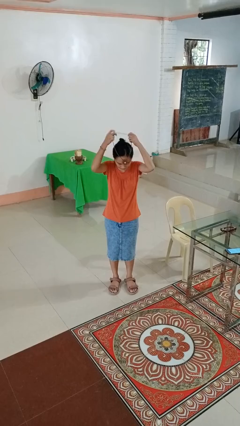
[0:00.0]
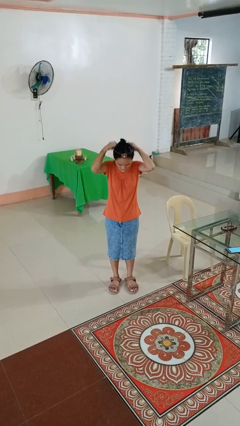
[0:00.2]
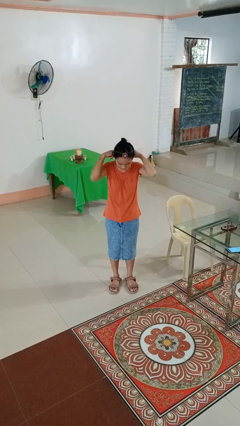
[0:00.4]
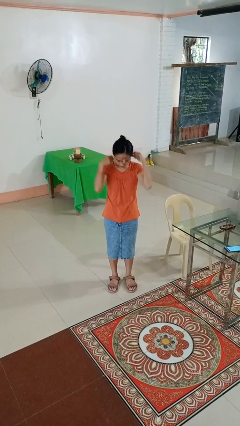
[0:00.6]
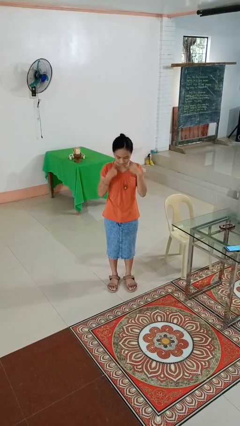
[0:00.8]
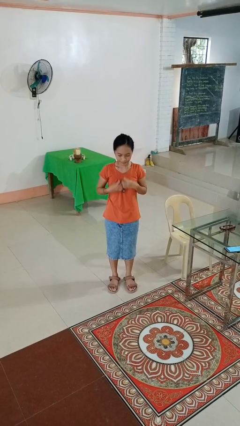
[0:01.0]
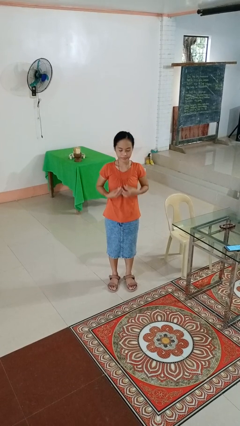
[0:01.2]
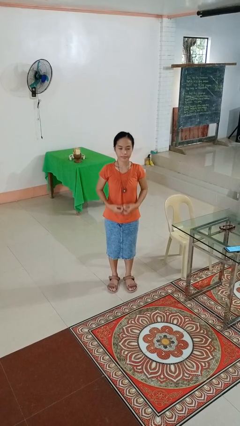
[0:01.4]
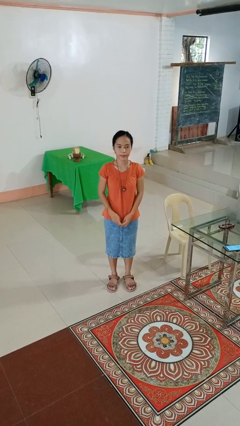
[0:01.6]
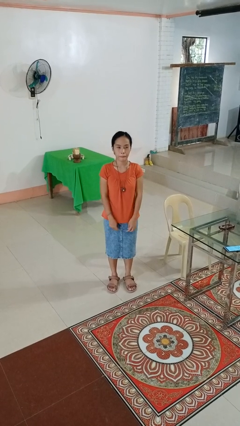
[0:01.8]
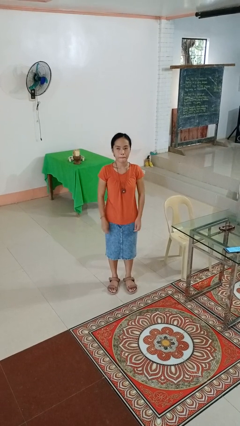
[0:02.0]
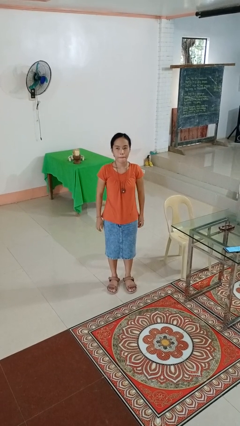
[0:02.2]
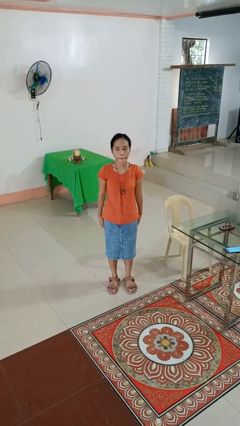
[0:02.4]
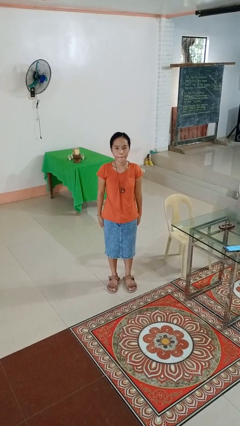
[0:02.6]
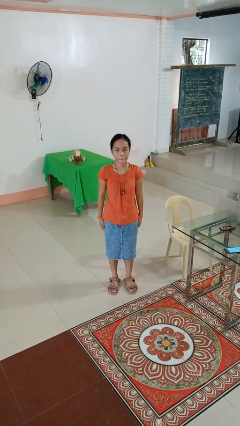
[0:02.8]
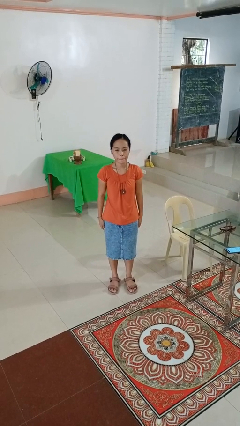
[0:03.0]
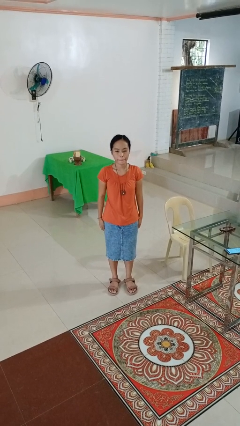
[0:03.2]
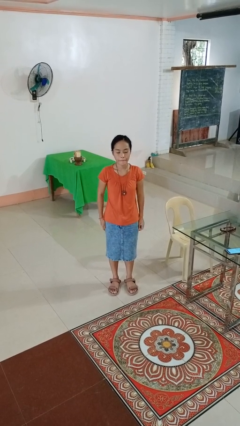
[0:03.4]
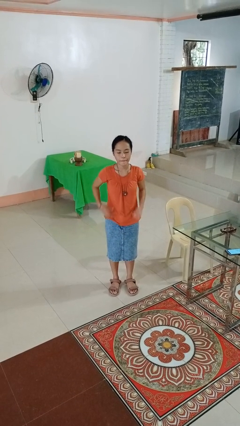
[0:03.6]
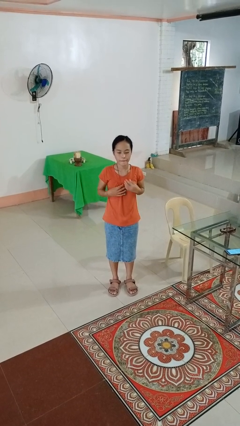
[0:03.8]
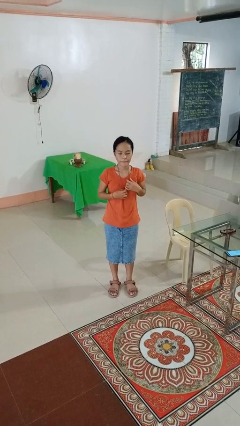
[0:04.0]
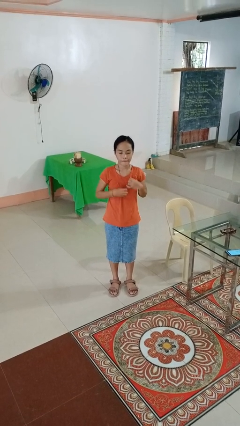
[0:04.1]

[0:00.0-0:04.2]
person puts on necklace

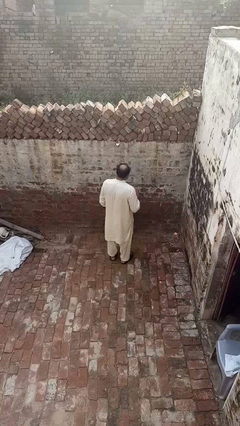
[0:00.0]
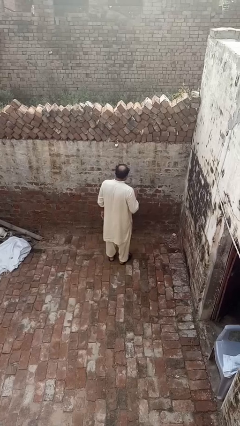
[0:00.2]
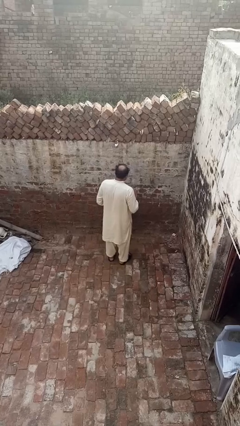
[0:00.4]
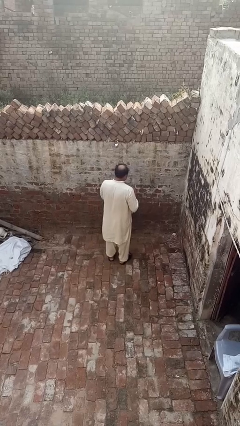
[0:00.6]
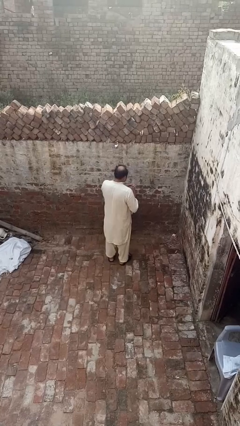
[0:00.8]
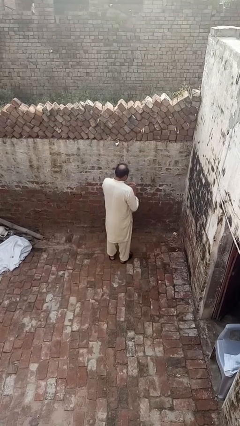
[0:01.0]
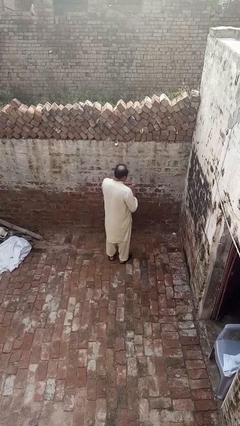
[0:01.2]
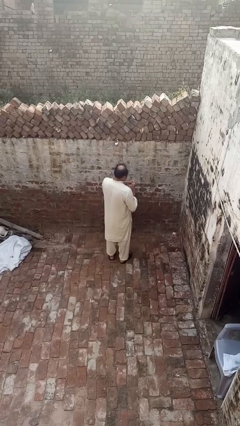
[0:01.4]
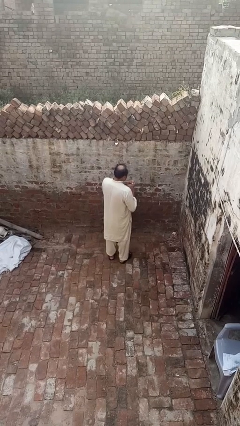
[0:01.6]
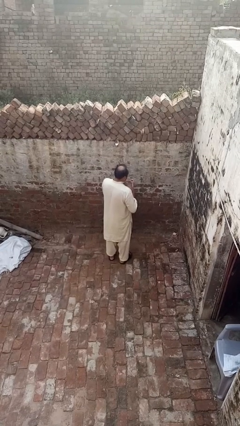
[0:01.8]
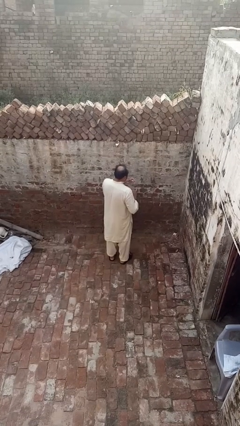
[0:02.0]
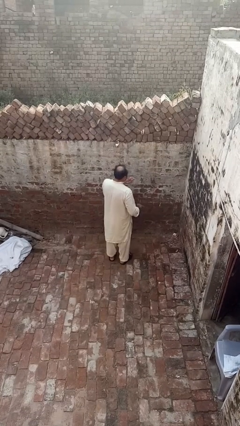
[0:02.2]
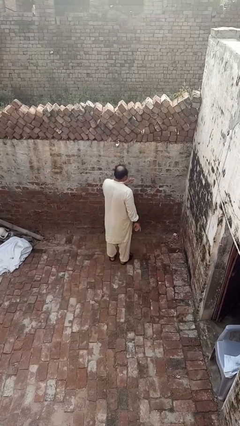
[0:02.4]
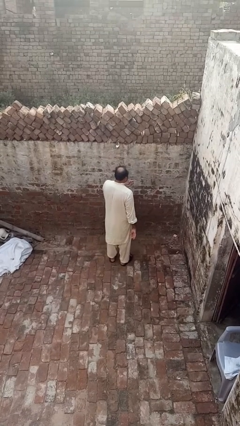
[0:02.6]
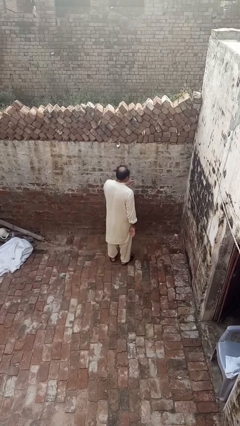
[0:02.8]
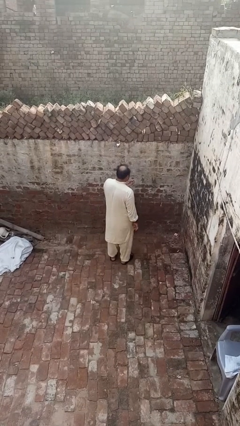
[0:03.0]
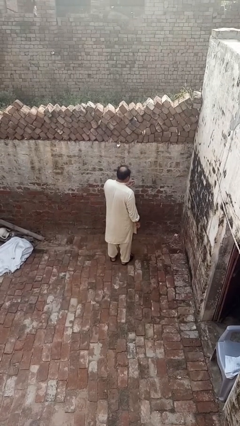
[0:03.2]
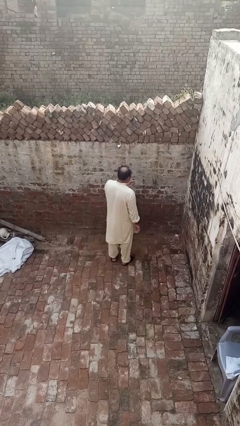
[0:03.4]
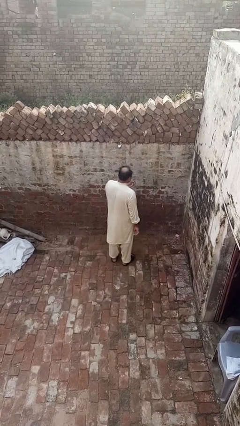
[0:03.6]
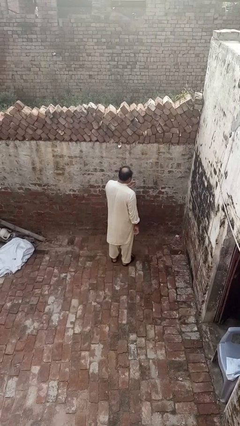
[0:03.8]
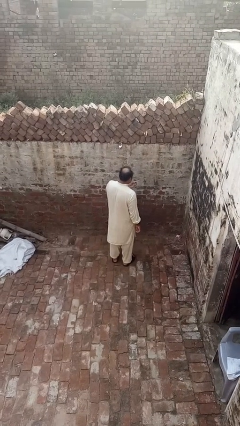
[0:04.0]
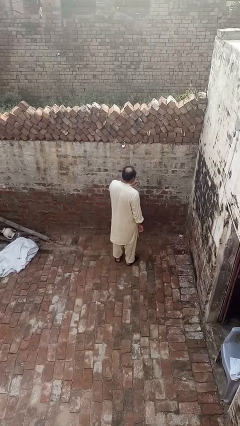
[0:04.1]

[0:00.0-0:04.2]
person takes off ring

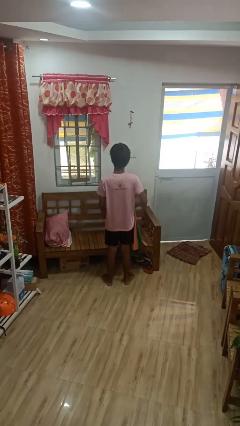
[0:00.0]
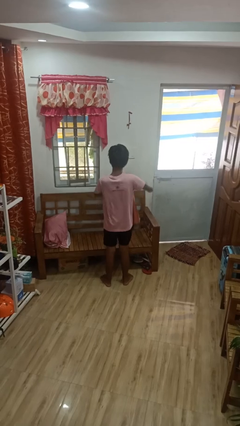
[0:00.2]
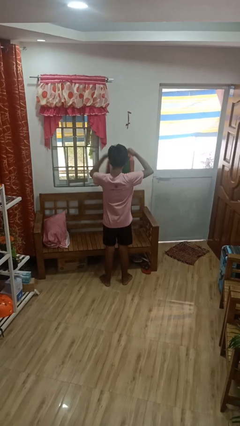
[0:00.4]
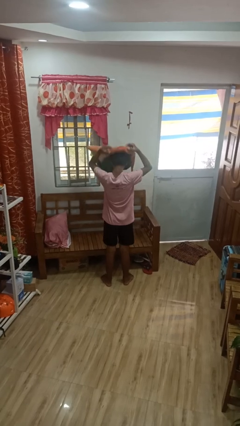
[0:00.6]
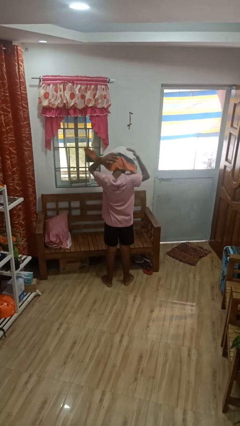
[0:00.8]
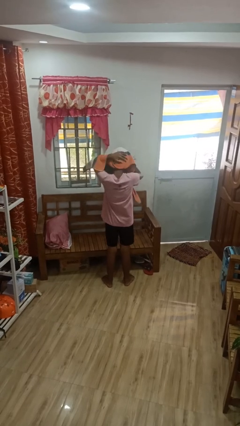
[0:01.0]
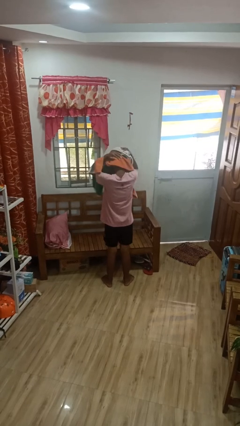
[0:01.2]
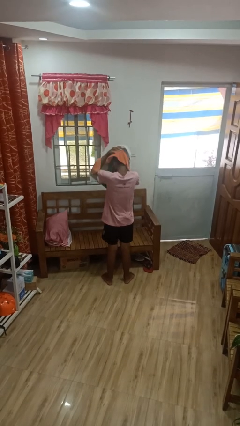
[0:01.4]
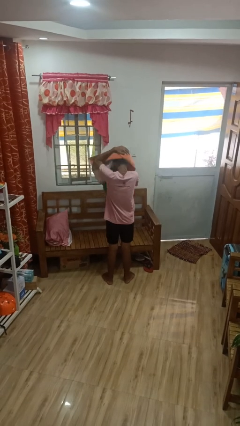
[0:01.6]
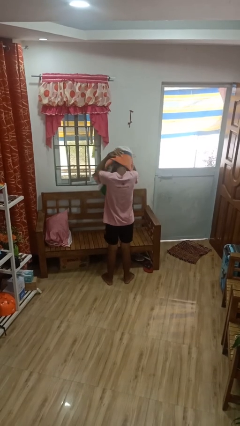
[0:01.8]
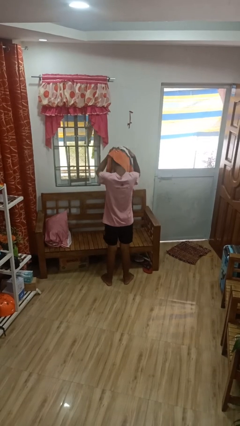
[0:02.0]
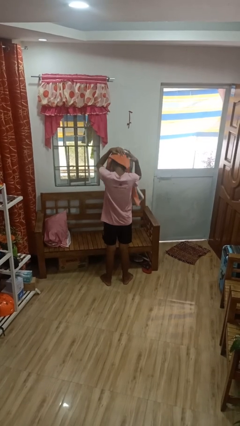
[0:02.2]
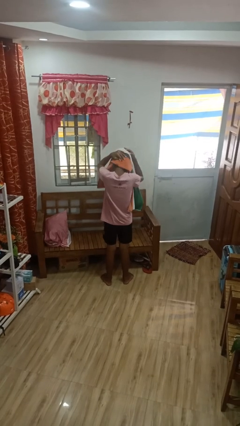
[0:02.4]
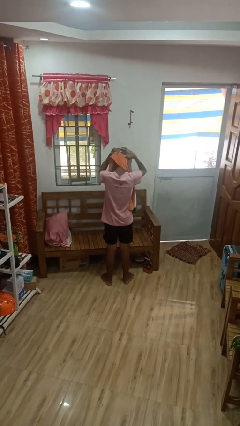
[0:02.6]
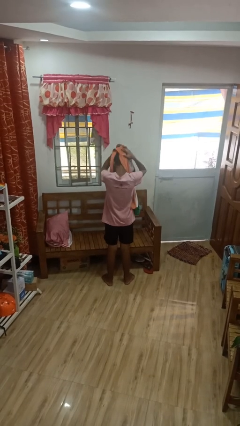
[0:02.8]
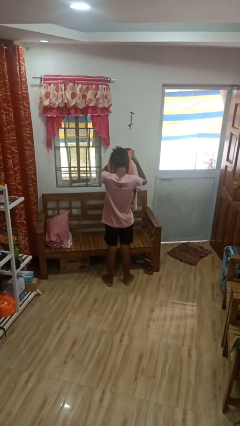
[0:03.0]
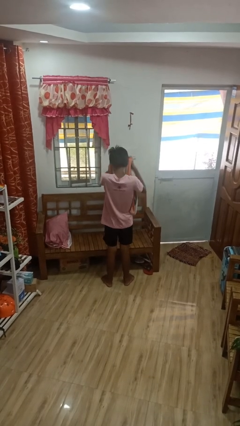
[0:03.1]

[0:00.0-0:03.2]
person dries hair with towel

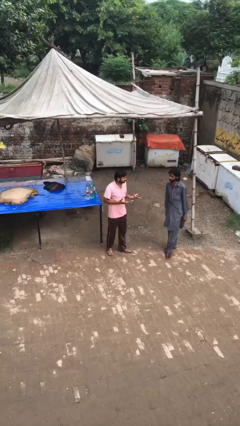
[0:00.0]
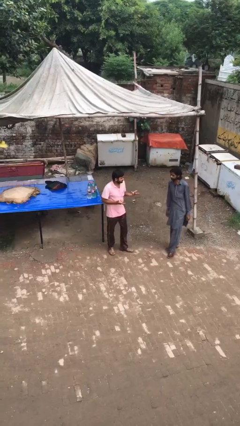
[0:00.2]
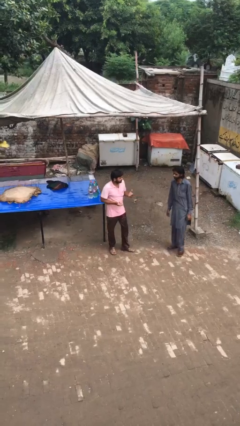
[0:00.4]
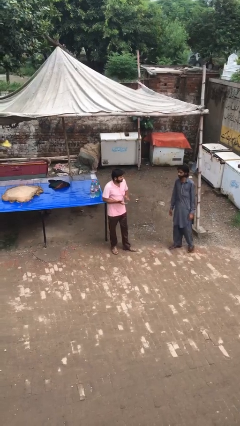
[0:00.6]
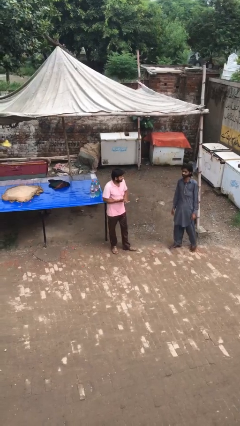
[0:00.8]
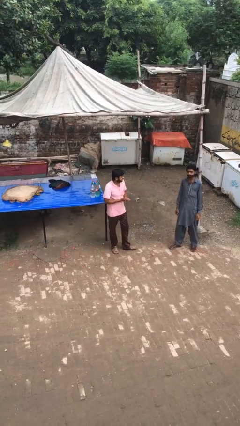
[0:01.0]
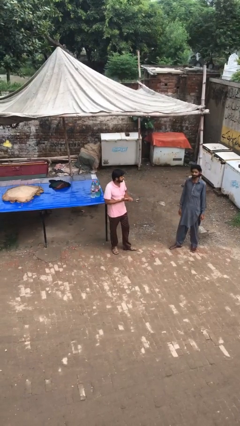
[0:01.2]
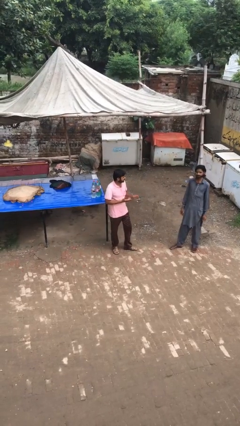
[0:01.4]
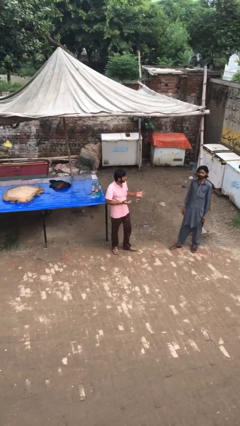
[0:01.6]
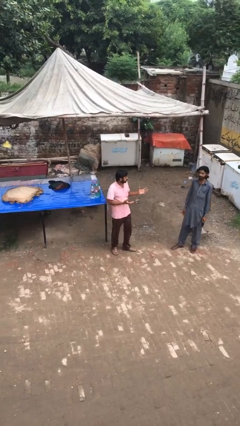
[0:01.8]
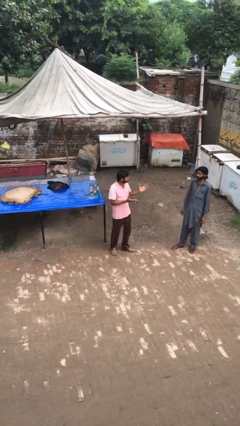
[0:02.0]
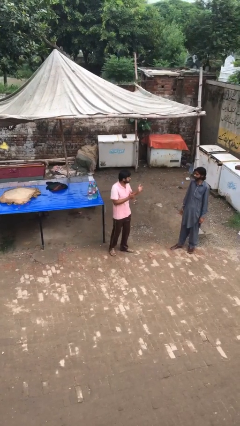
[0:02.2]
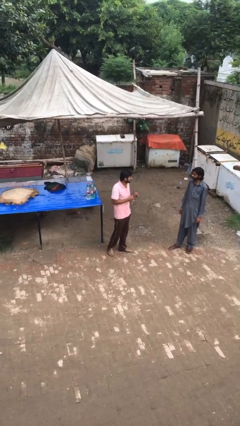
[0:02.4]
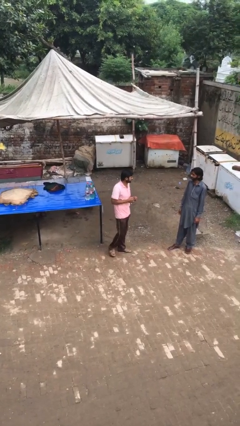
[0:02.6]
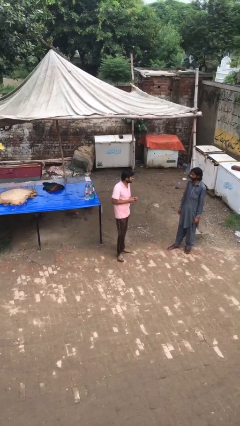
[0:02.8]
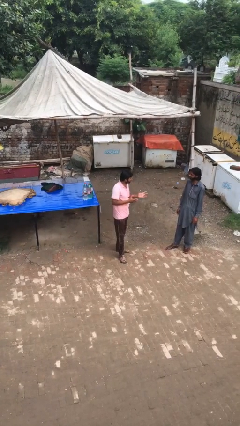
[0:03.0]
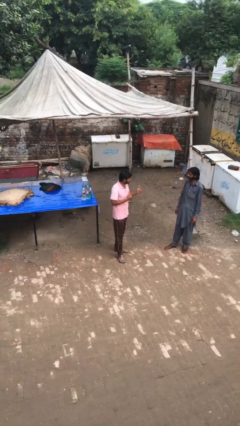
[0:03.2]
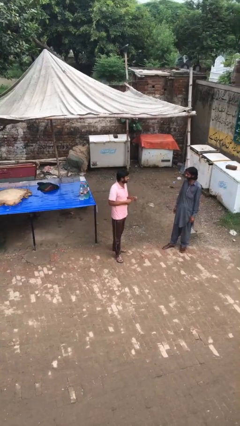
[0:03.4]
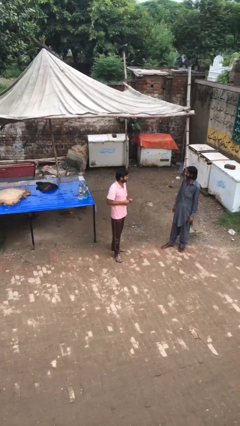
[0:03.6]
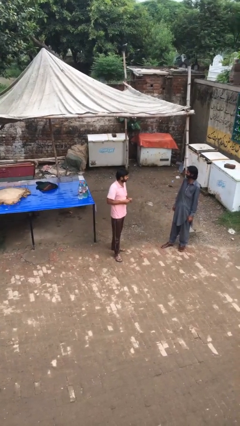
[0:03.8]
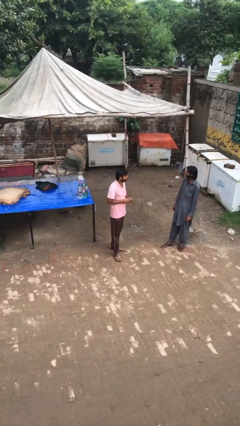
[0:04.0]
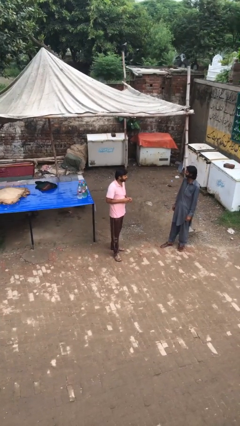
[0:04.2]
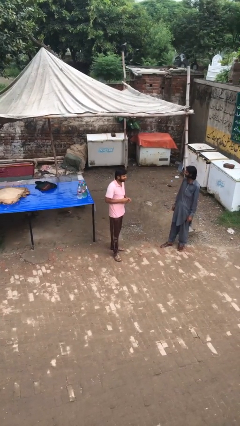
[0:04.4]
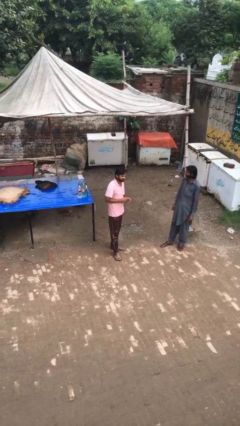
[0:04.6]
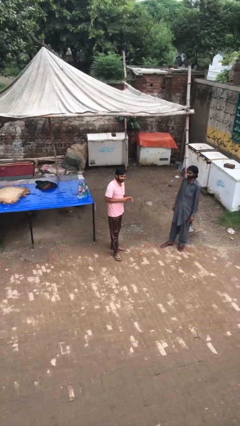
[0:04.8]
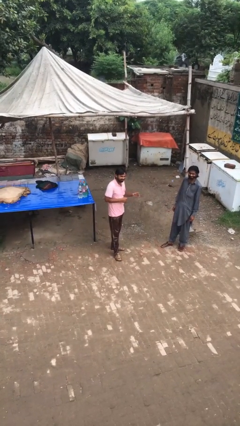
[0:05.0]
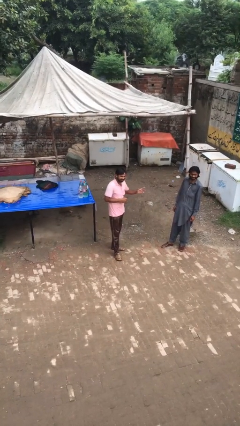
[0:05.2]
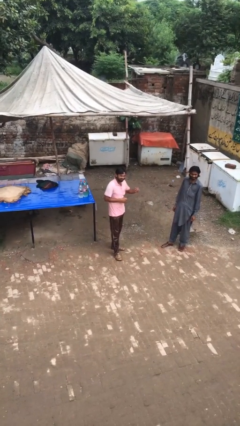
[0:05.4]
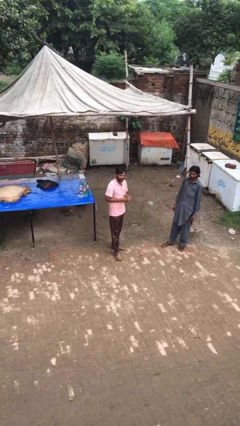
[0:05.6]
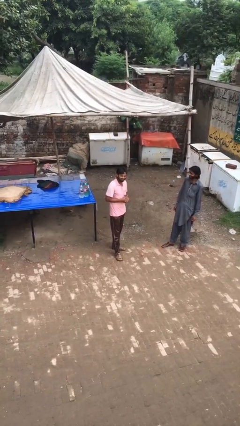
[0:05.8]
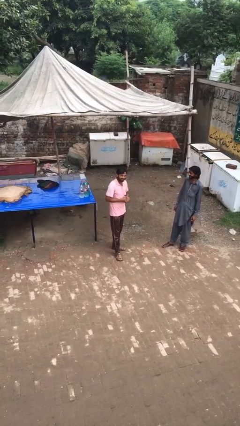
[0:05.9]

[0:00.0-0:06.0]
person talks to person

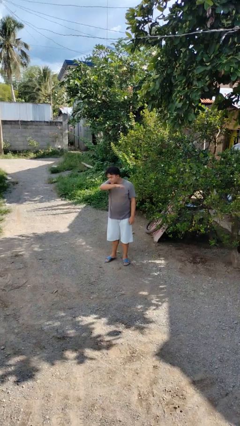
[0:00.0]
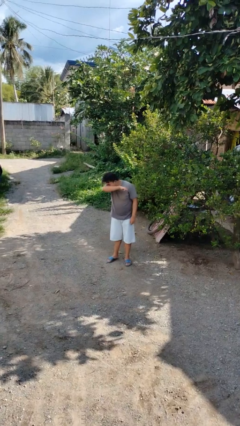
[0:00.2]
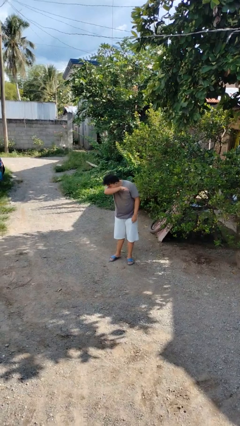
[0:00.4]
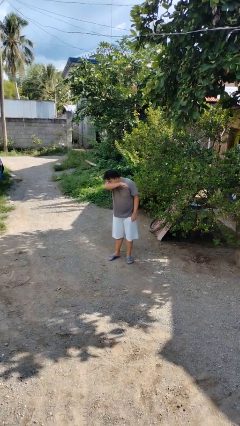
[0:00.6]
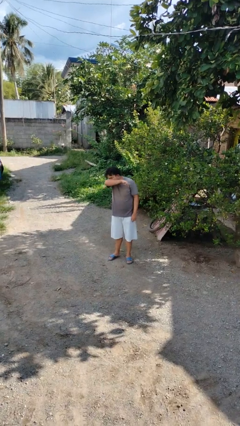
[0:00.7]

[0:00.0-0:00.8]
person sneezes into arm
